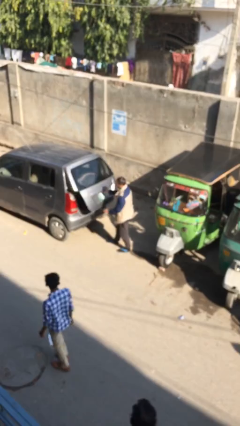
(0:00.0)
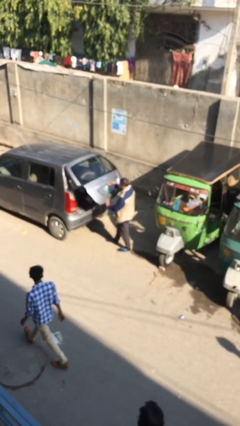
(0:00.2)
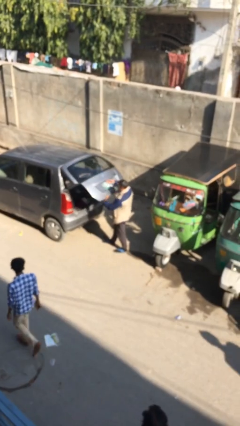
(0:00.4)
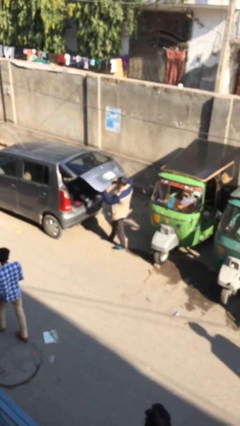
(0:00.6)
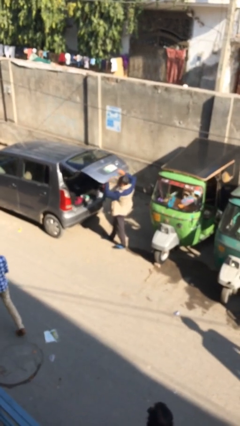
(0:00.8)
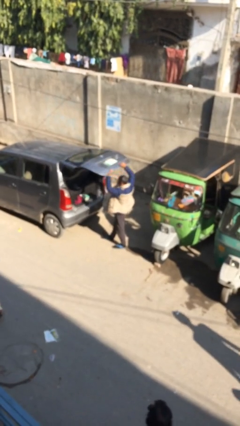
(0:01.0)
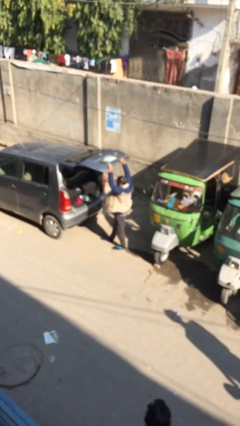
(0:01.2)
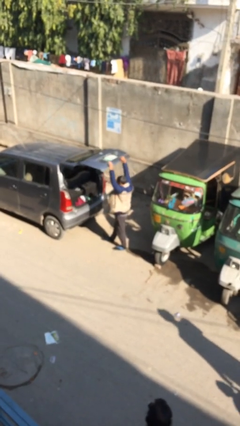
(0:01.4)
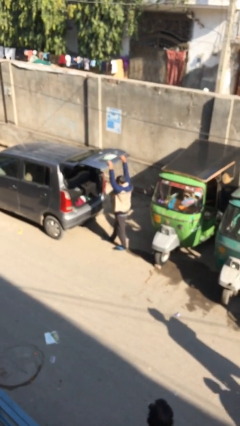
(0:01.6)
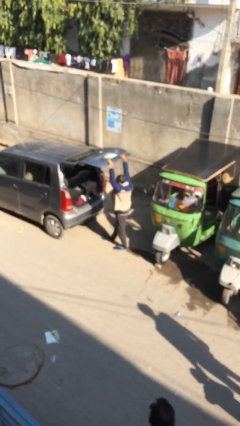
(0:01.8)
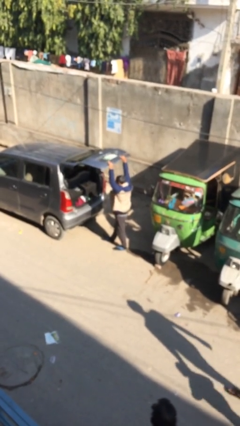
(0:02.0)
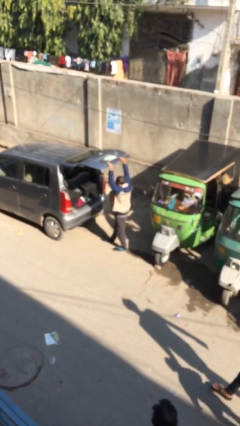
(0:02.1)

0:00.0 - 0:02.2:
person opens car trunk

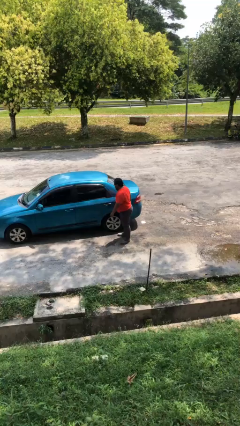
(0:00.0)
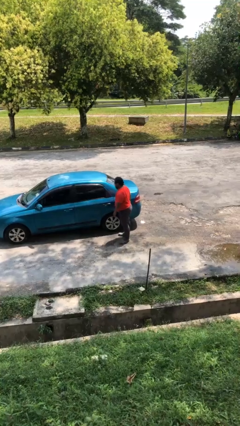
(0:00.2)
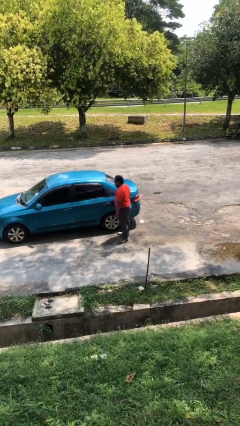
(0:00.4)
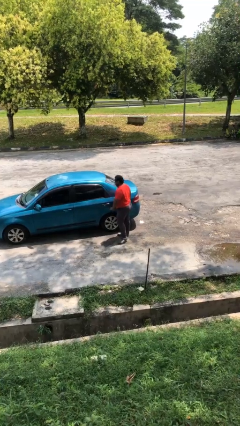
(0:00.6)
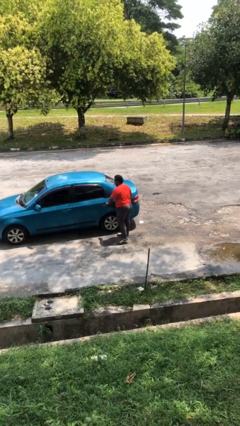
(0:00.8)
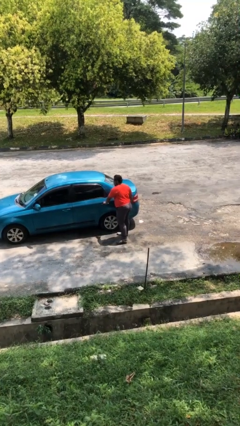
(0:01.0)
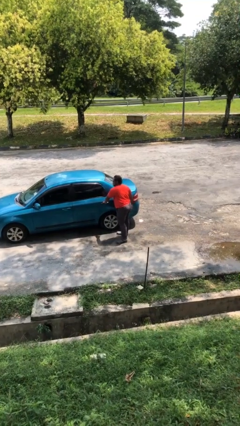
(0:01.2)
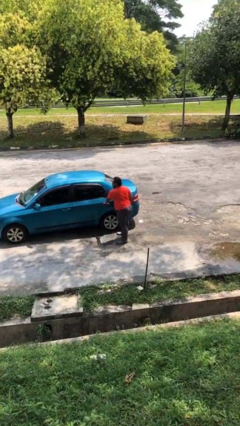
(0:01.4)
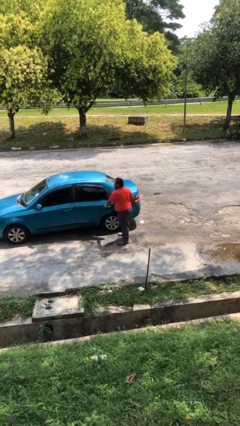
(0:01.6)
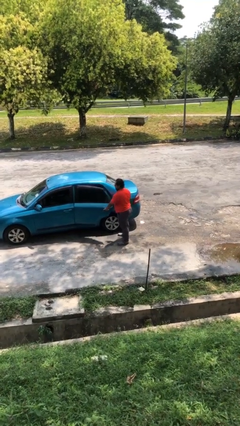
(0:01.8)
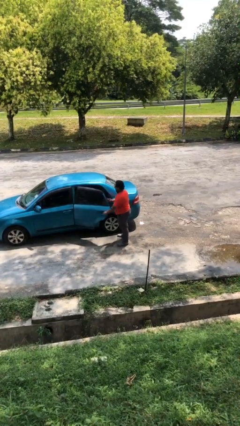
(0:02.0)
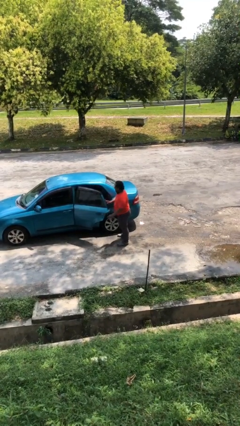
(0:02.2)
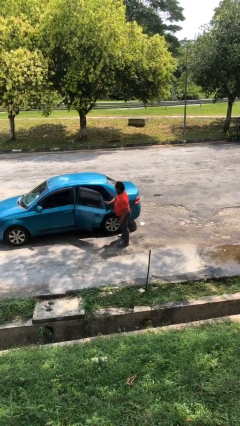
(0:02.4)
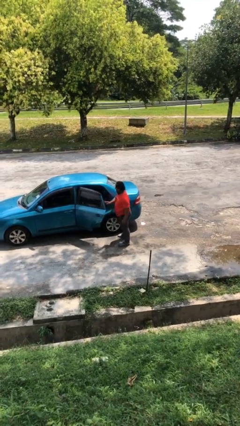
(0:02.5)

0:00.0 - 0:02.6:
person opens car door

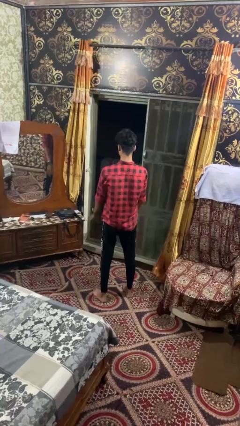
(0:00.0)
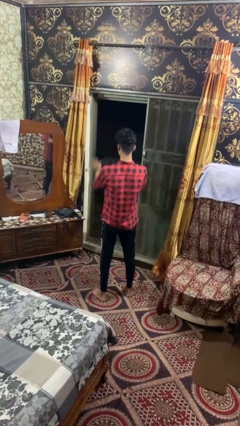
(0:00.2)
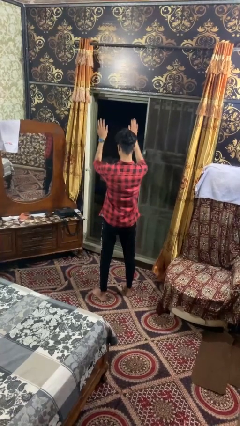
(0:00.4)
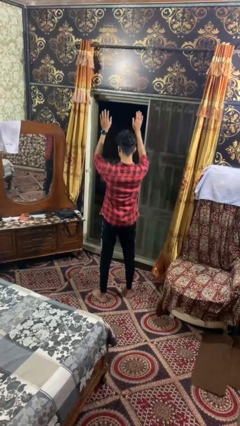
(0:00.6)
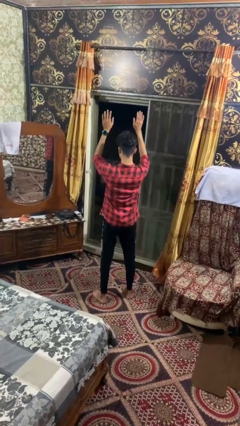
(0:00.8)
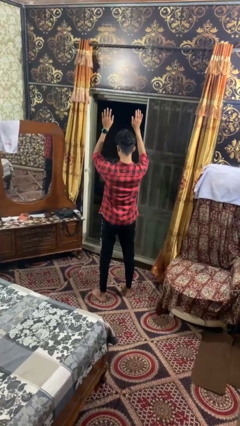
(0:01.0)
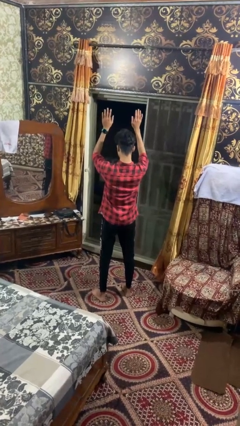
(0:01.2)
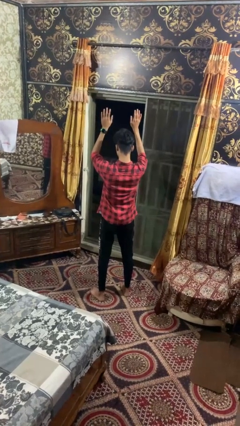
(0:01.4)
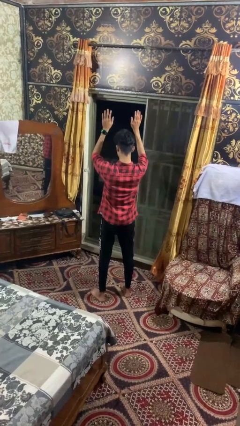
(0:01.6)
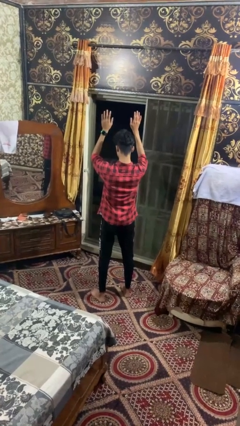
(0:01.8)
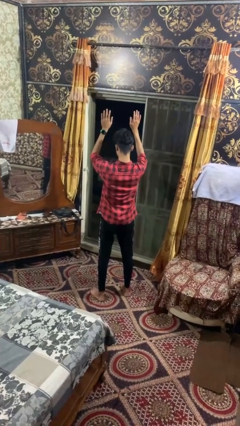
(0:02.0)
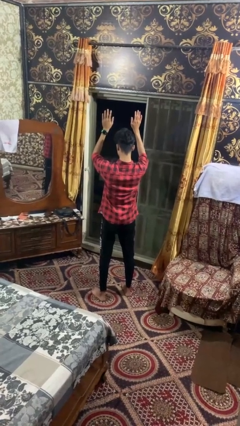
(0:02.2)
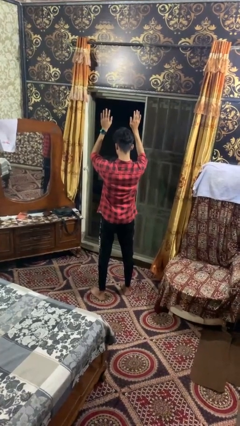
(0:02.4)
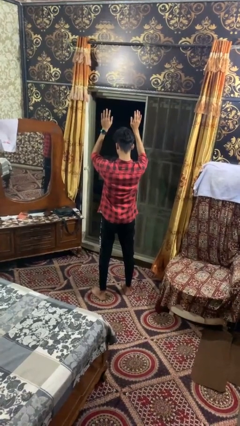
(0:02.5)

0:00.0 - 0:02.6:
person gestures swipe up

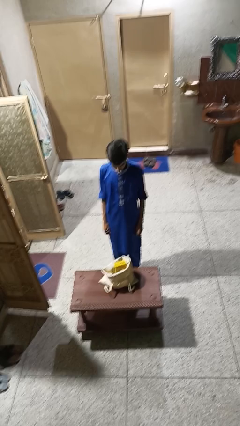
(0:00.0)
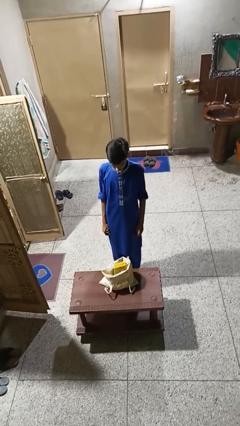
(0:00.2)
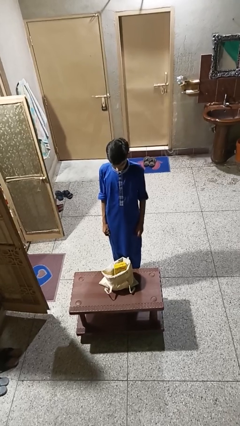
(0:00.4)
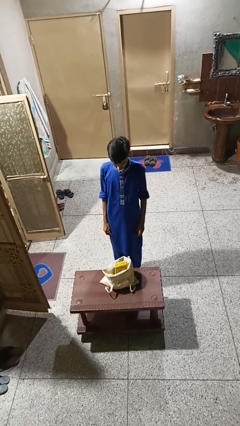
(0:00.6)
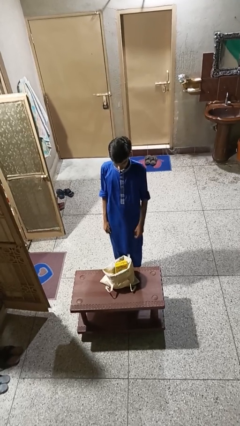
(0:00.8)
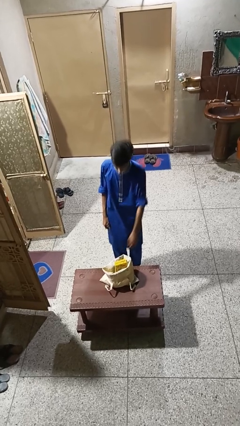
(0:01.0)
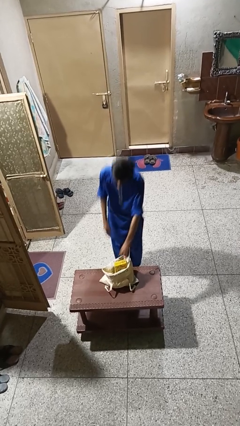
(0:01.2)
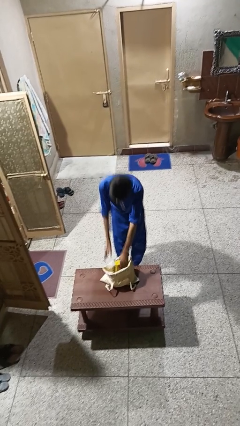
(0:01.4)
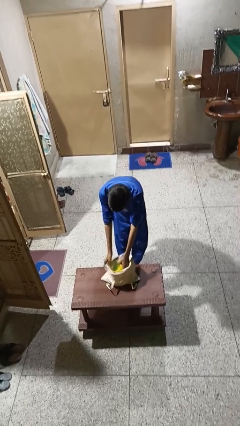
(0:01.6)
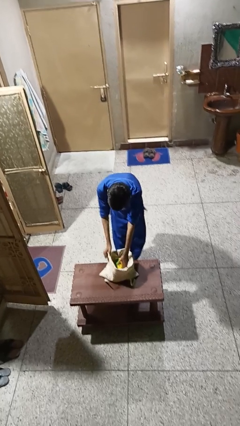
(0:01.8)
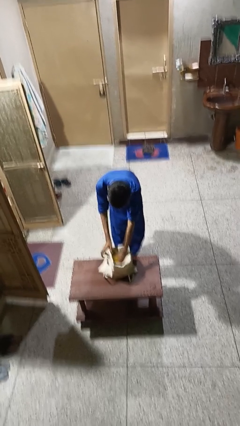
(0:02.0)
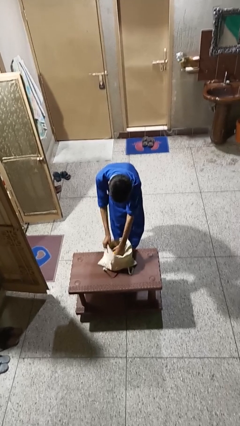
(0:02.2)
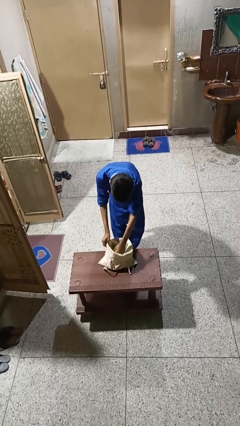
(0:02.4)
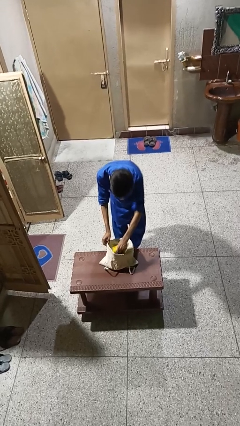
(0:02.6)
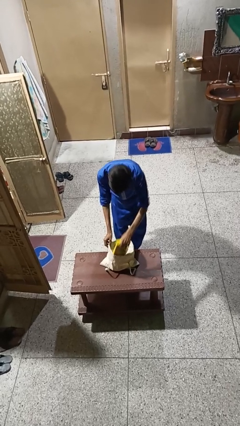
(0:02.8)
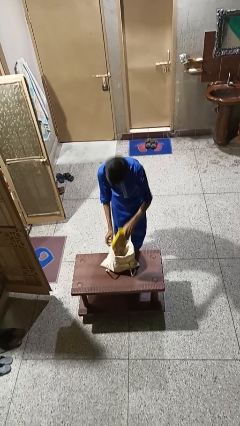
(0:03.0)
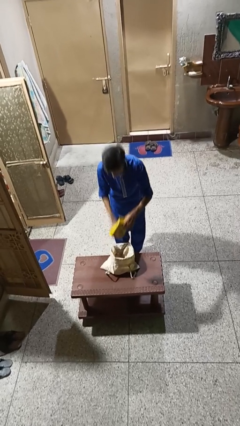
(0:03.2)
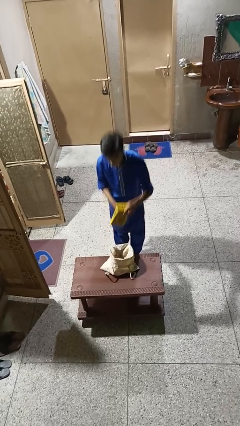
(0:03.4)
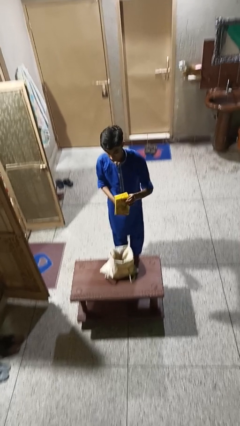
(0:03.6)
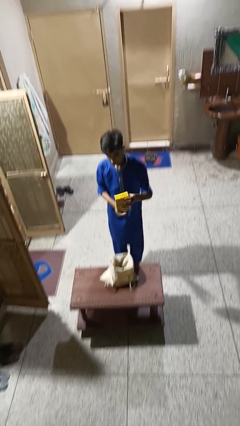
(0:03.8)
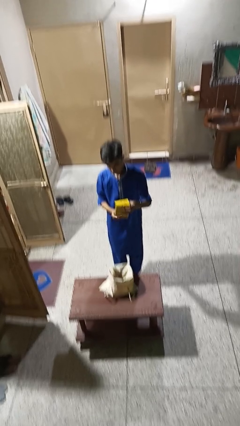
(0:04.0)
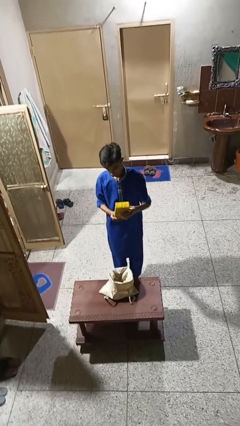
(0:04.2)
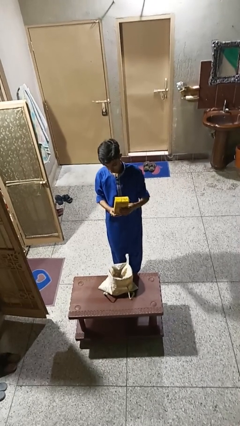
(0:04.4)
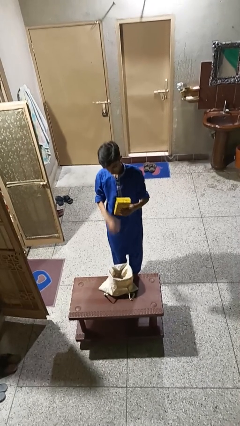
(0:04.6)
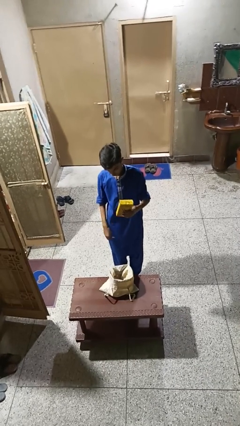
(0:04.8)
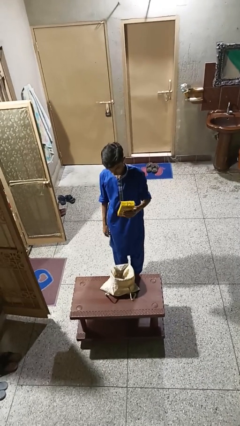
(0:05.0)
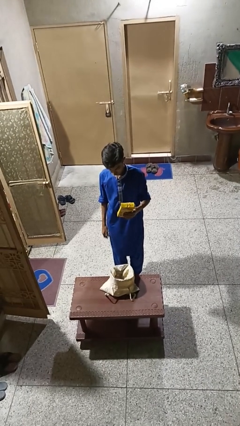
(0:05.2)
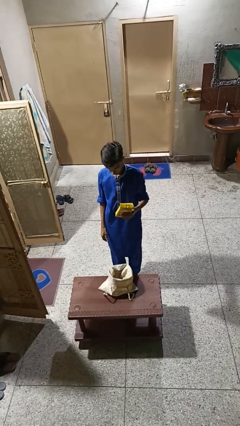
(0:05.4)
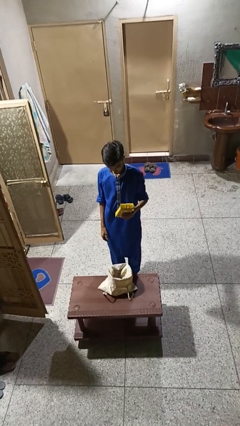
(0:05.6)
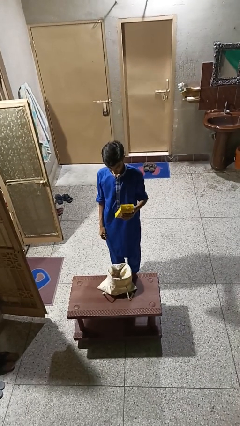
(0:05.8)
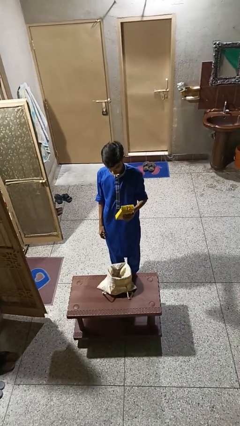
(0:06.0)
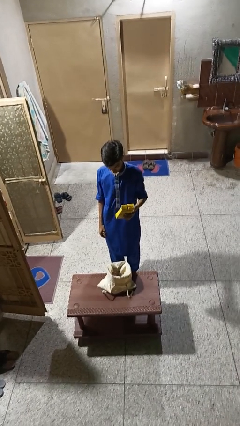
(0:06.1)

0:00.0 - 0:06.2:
person takes object from bag

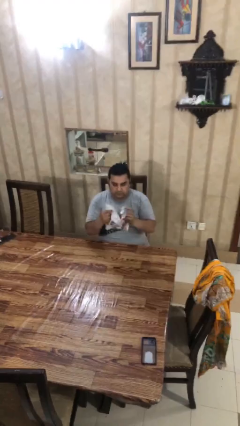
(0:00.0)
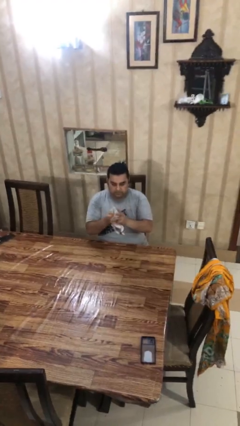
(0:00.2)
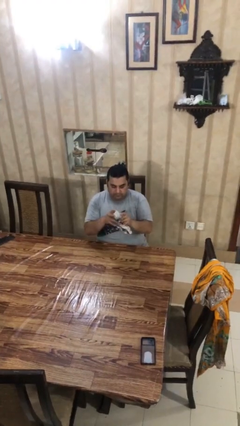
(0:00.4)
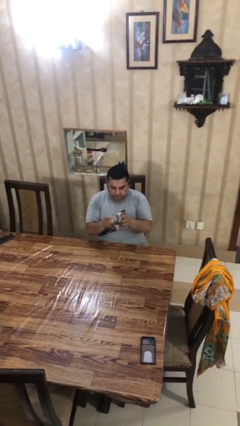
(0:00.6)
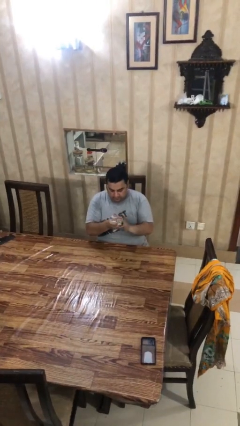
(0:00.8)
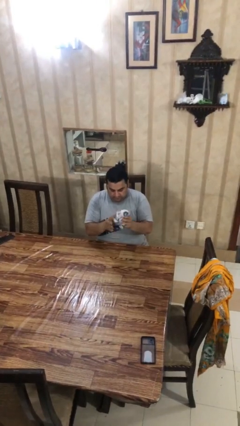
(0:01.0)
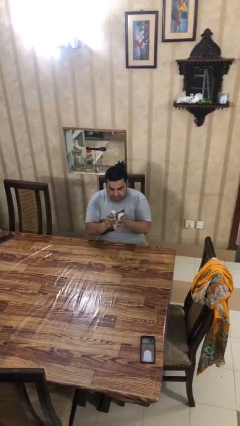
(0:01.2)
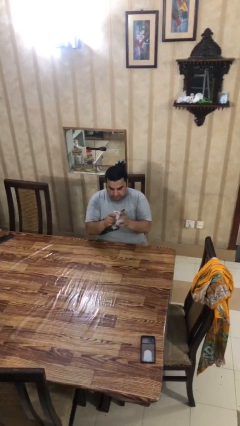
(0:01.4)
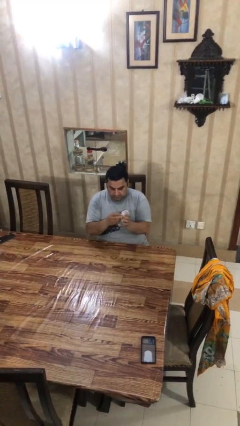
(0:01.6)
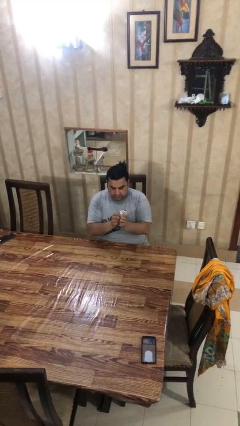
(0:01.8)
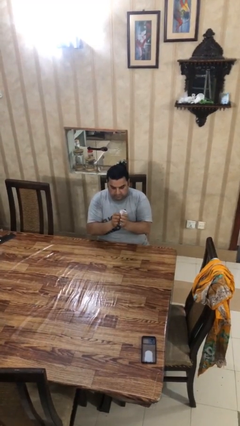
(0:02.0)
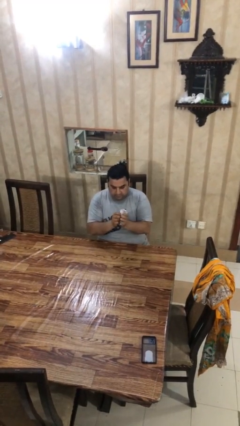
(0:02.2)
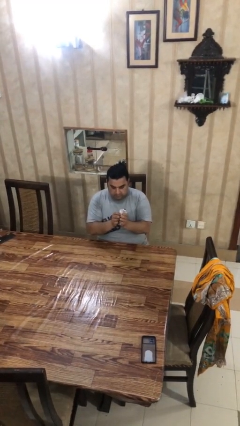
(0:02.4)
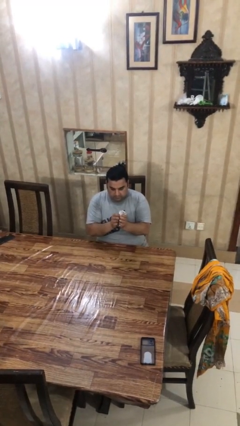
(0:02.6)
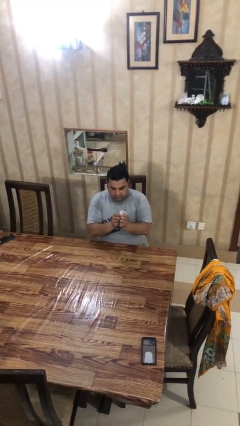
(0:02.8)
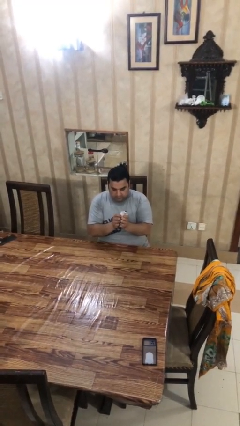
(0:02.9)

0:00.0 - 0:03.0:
person crumples paper

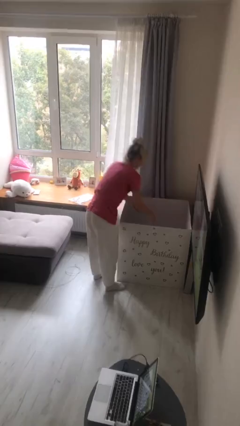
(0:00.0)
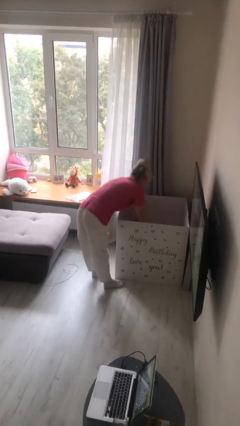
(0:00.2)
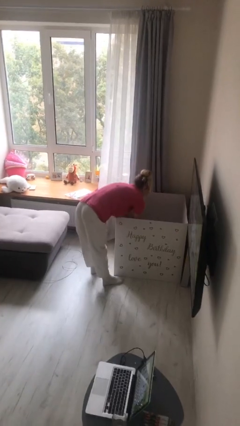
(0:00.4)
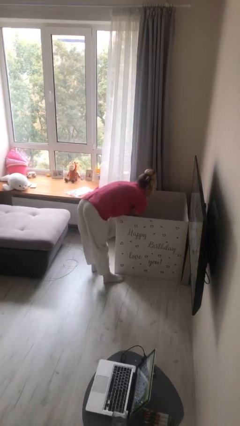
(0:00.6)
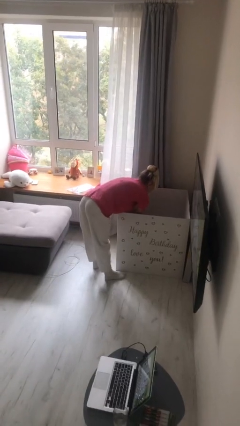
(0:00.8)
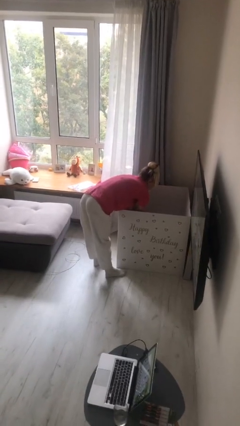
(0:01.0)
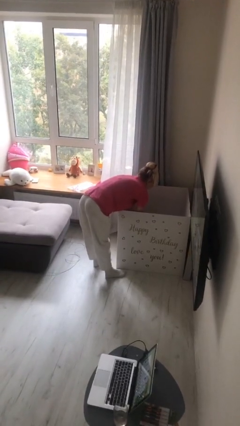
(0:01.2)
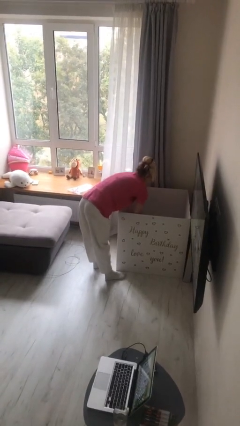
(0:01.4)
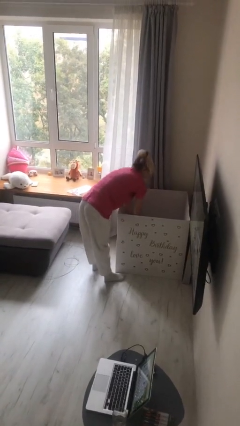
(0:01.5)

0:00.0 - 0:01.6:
person searches in box
